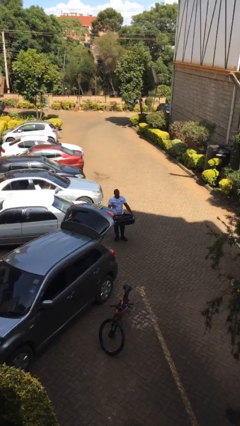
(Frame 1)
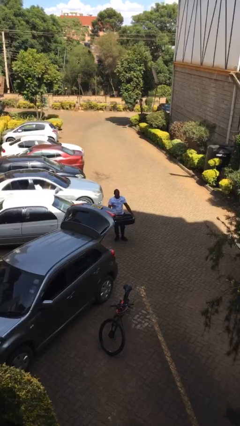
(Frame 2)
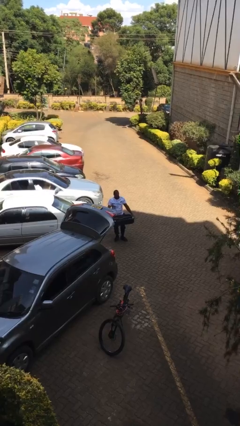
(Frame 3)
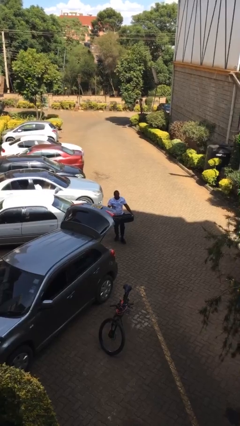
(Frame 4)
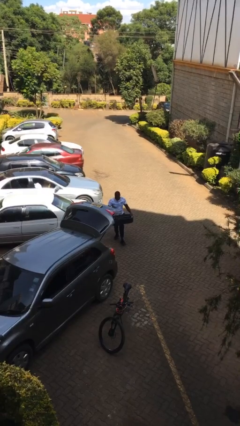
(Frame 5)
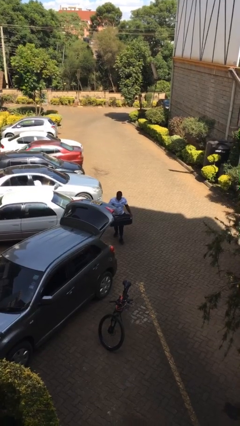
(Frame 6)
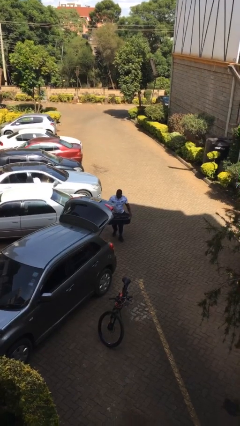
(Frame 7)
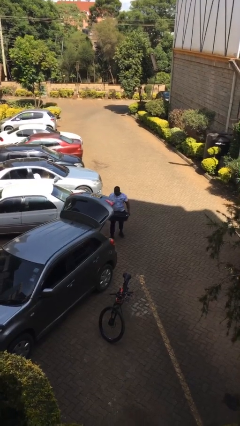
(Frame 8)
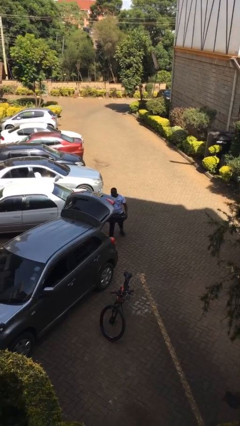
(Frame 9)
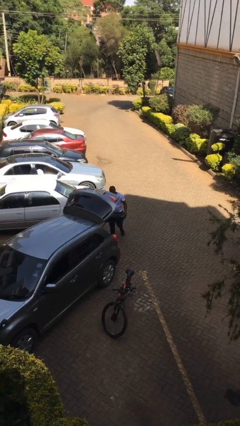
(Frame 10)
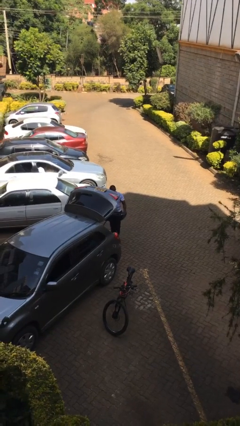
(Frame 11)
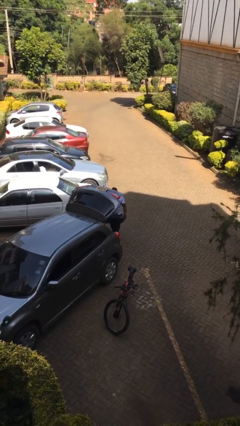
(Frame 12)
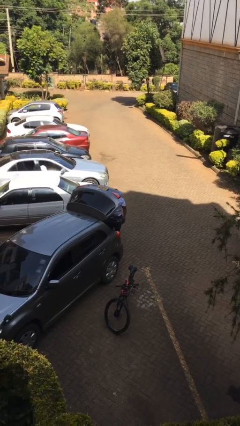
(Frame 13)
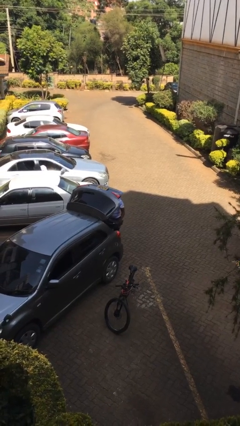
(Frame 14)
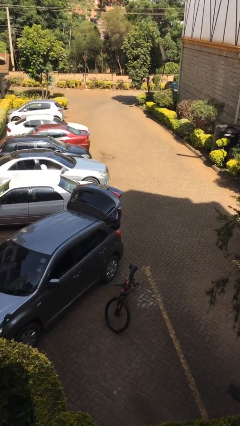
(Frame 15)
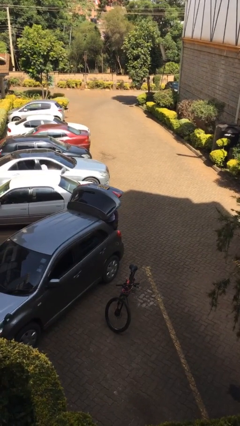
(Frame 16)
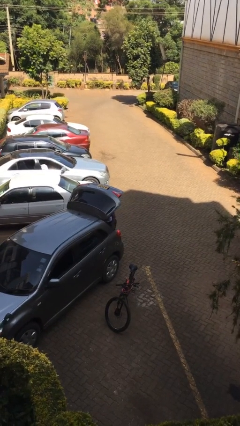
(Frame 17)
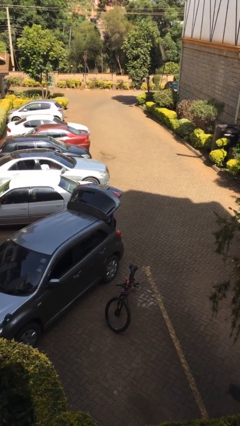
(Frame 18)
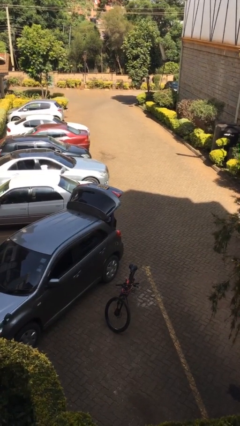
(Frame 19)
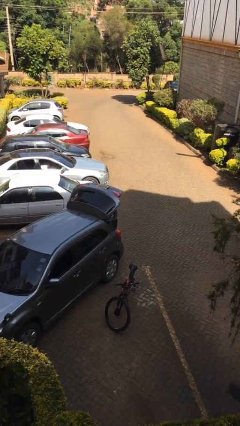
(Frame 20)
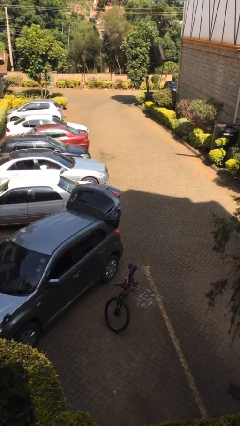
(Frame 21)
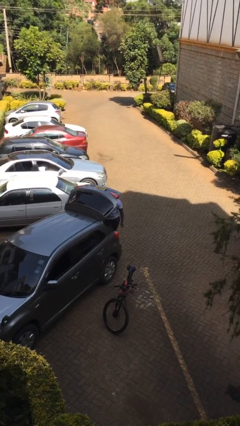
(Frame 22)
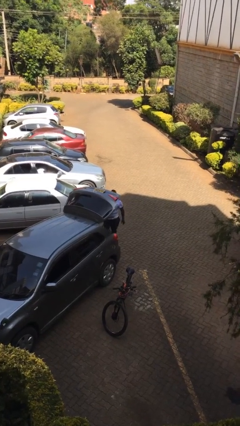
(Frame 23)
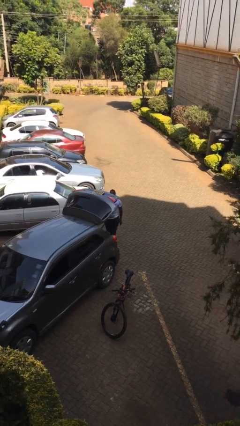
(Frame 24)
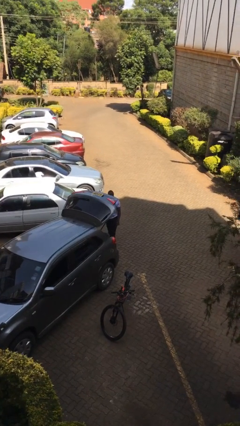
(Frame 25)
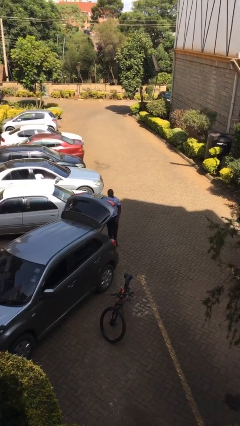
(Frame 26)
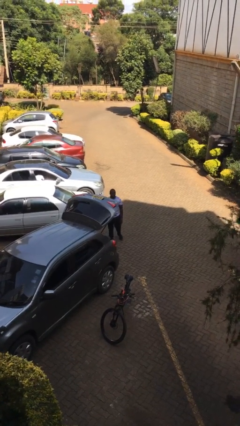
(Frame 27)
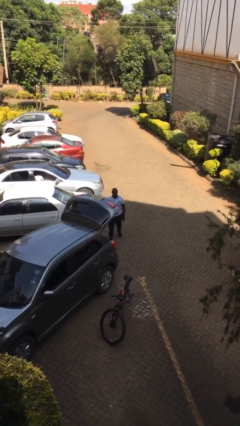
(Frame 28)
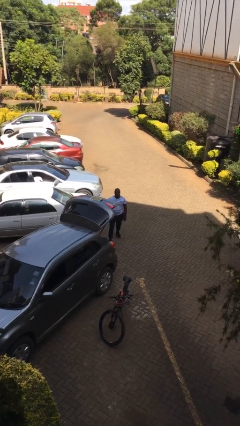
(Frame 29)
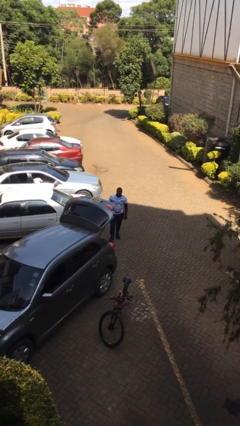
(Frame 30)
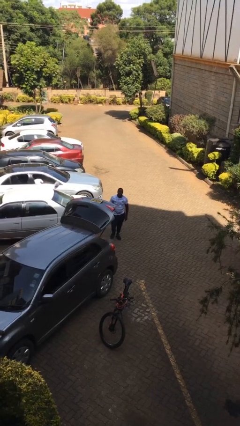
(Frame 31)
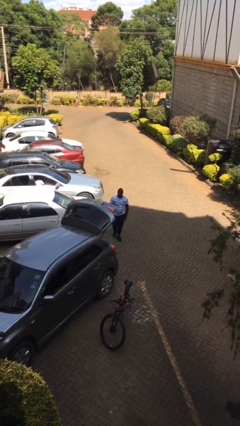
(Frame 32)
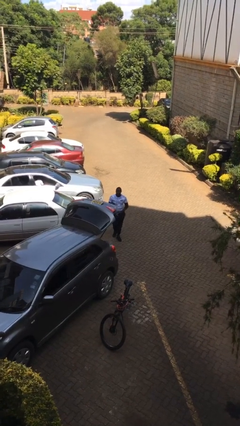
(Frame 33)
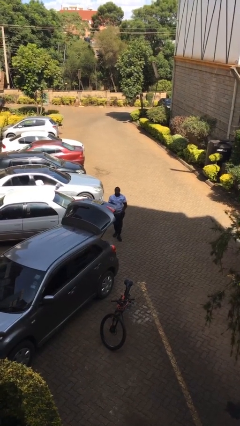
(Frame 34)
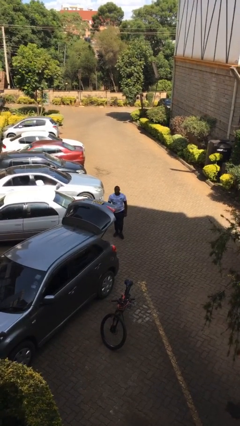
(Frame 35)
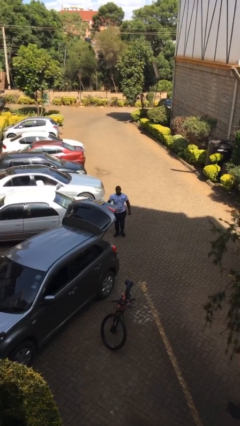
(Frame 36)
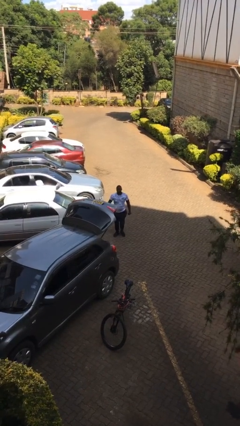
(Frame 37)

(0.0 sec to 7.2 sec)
person loads car

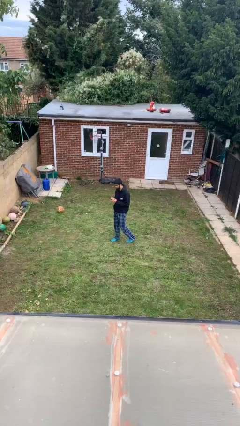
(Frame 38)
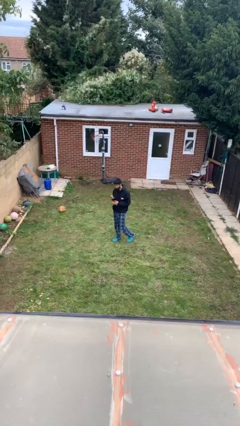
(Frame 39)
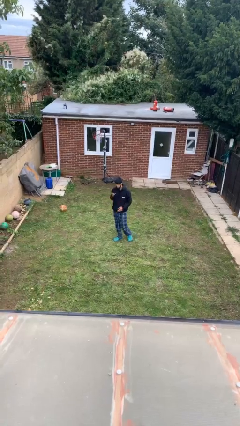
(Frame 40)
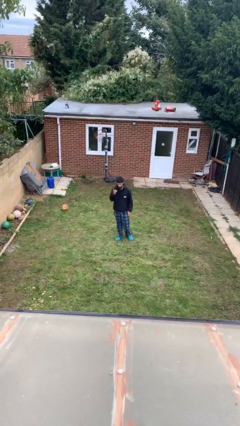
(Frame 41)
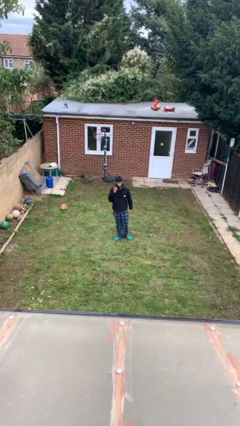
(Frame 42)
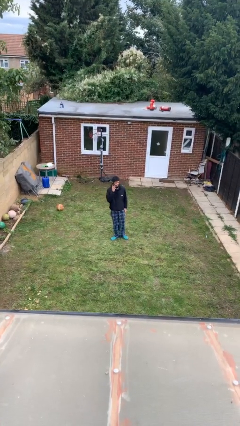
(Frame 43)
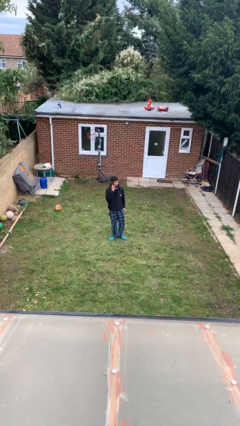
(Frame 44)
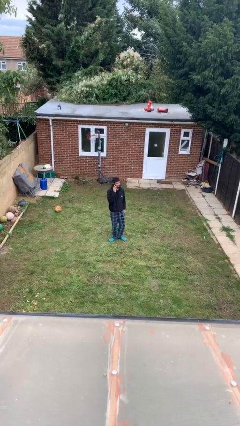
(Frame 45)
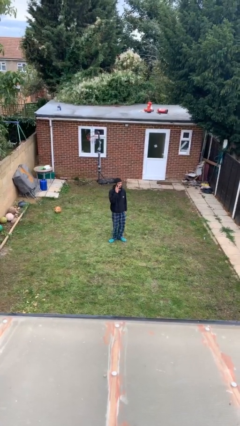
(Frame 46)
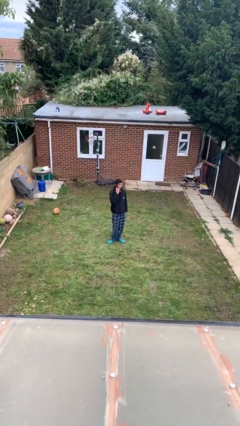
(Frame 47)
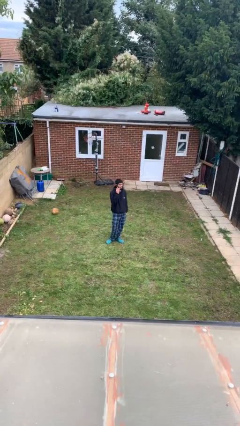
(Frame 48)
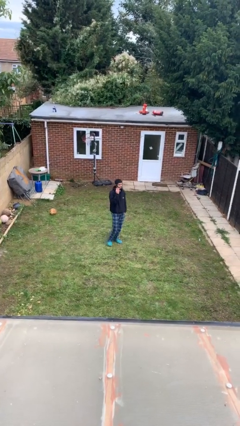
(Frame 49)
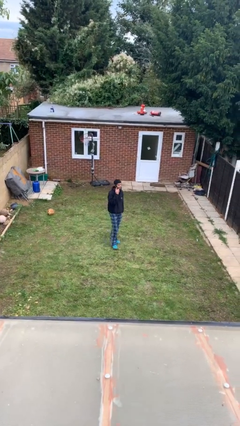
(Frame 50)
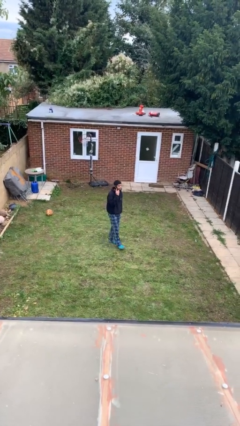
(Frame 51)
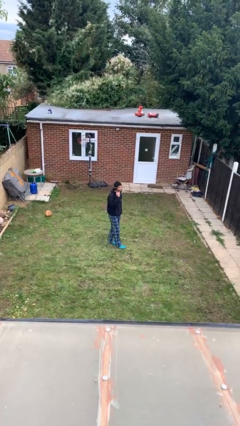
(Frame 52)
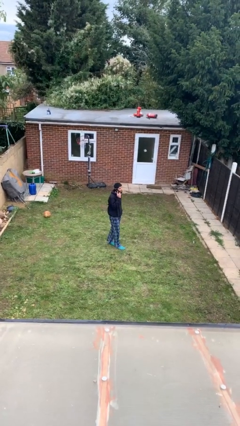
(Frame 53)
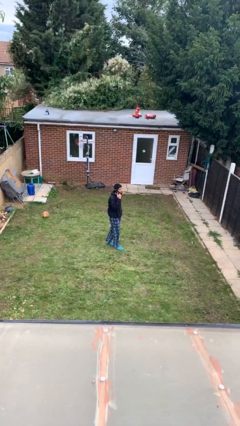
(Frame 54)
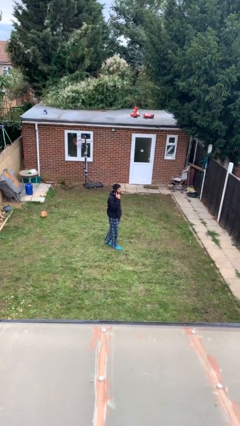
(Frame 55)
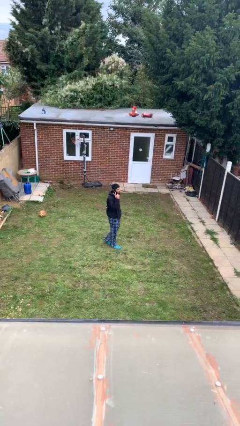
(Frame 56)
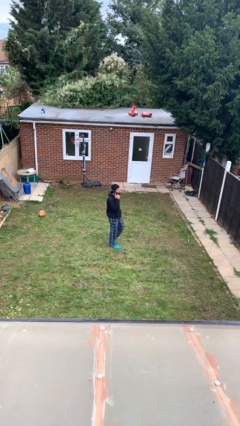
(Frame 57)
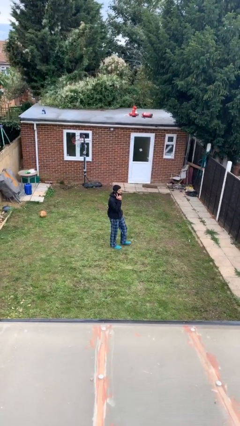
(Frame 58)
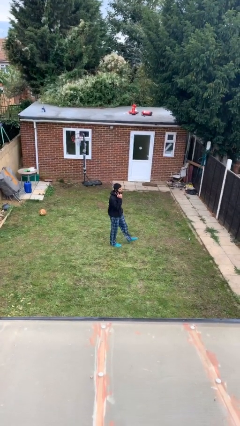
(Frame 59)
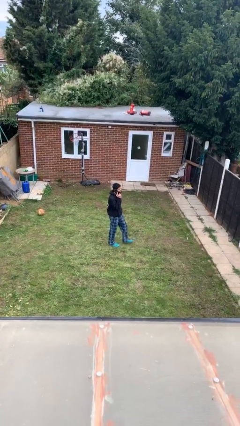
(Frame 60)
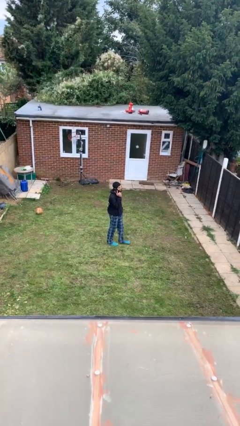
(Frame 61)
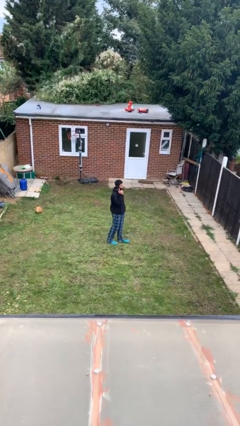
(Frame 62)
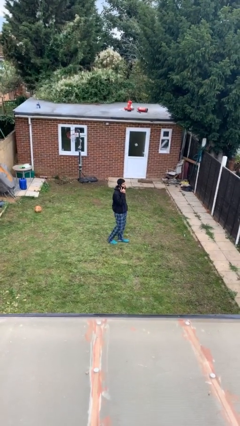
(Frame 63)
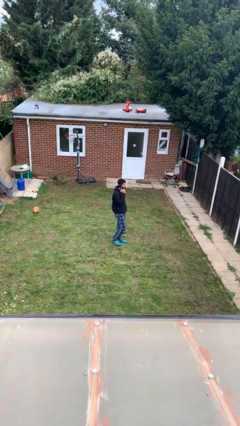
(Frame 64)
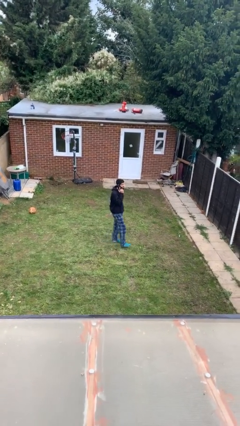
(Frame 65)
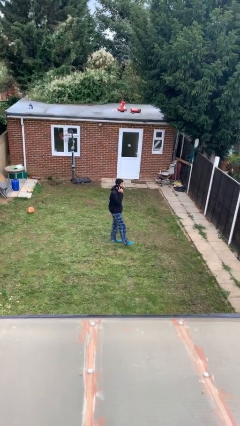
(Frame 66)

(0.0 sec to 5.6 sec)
person talks on phone

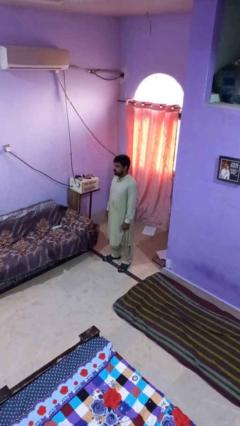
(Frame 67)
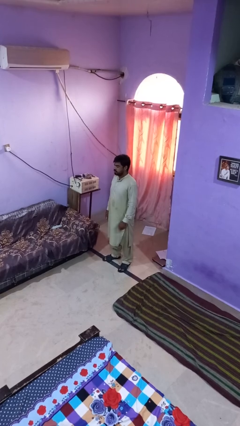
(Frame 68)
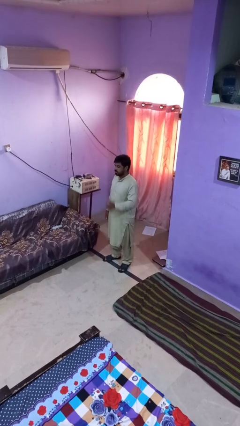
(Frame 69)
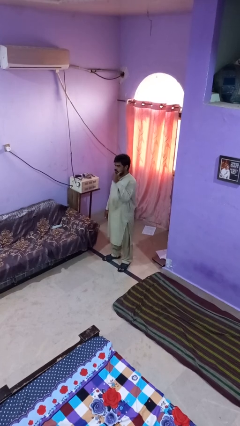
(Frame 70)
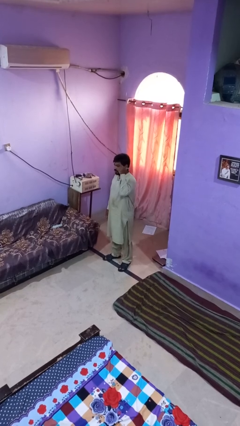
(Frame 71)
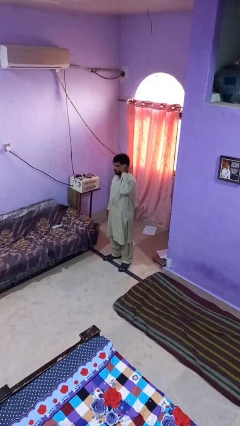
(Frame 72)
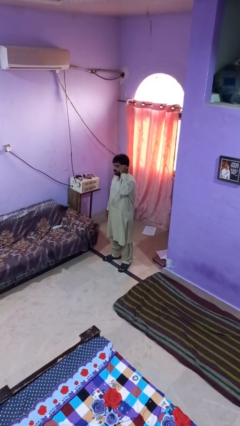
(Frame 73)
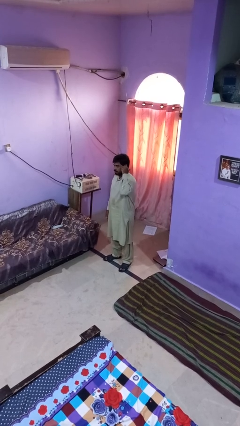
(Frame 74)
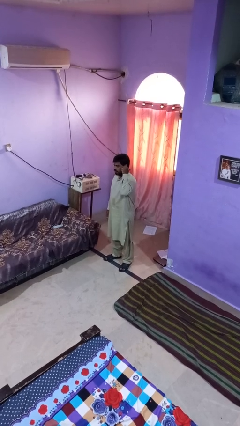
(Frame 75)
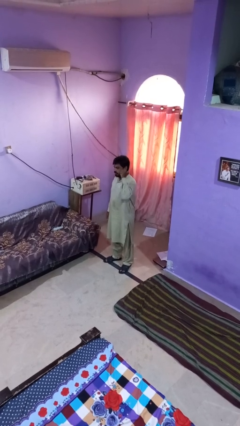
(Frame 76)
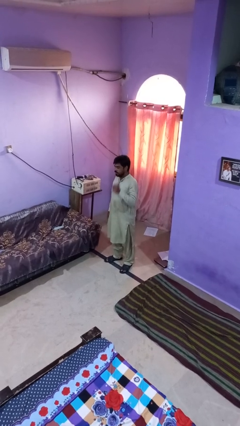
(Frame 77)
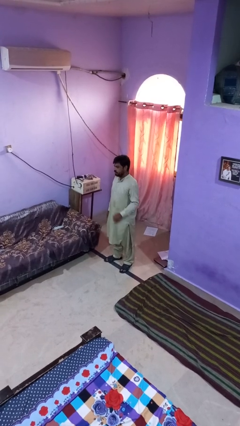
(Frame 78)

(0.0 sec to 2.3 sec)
person gestures behind me

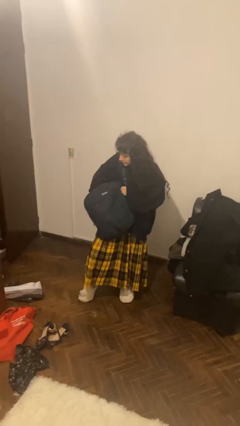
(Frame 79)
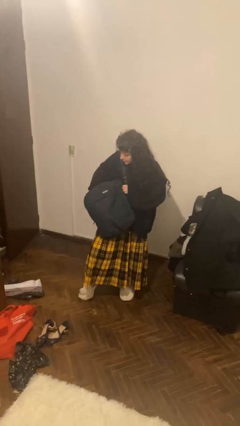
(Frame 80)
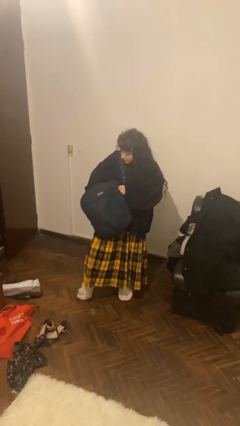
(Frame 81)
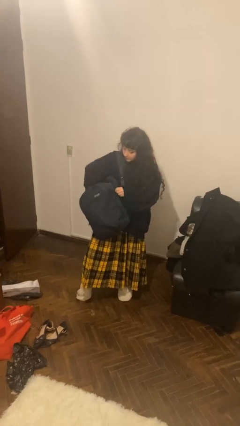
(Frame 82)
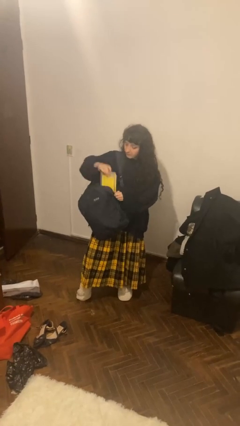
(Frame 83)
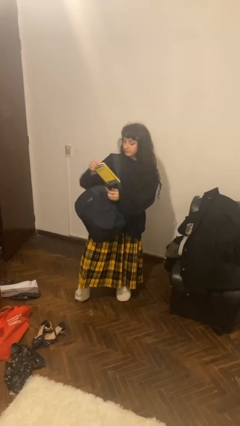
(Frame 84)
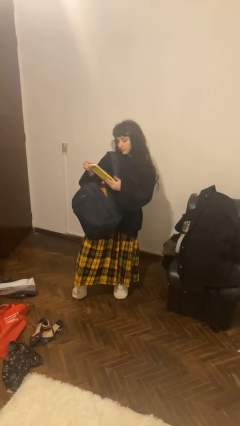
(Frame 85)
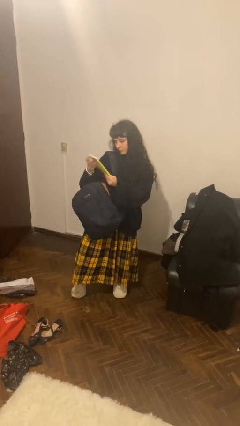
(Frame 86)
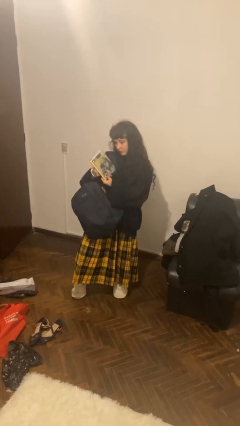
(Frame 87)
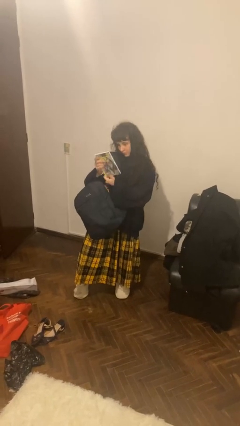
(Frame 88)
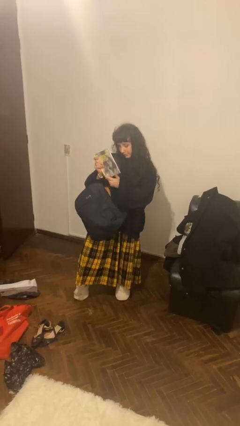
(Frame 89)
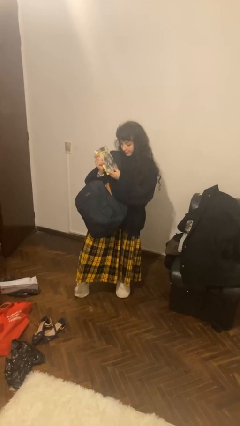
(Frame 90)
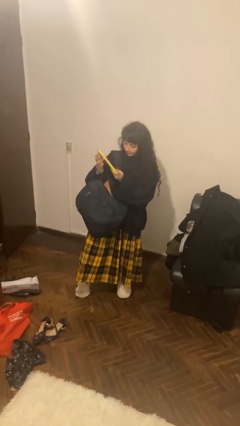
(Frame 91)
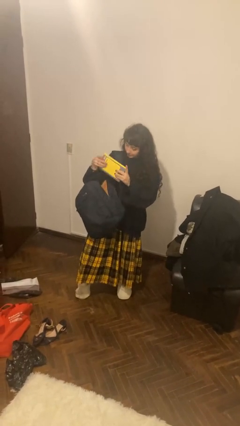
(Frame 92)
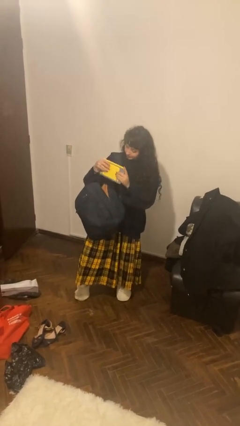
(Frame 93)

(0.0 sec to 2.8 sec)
person takes object from backpack
